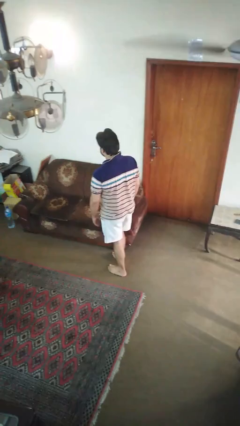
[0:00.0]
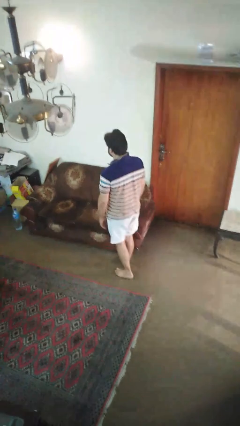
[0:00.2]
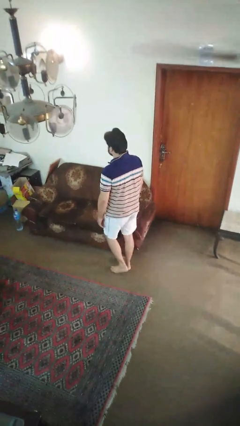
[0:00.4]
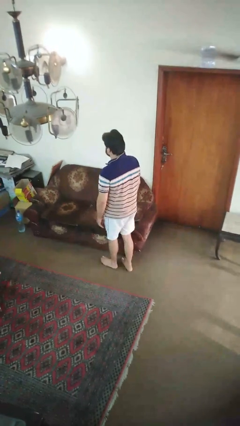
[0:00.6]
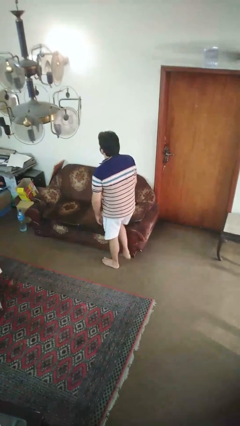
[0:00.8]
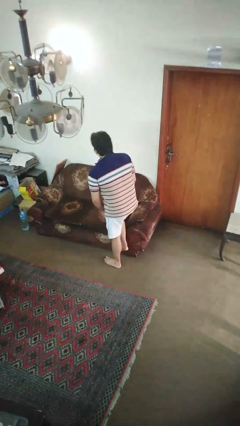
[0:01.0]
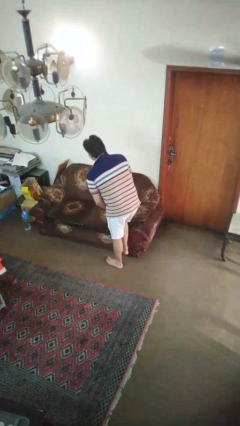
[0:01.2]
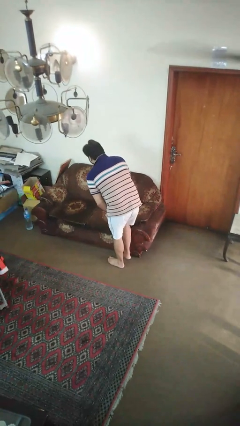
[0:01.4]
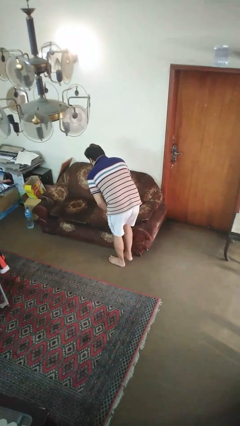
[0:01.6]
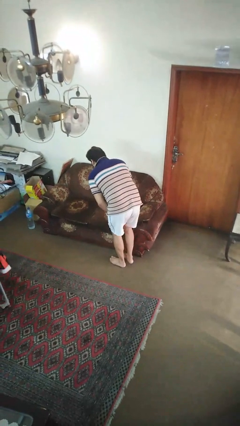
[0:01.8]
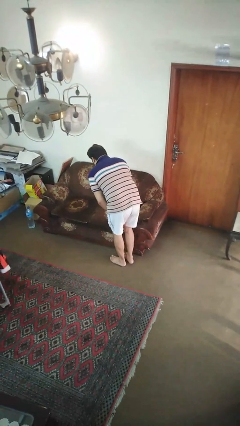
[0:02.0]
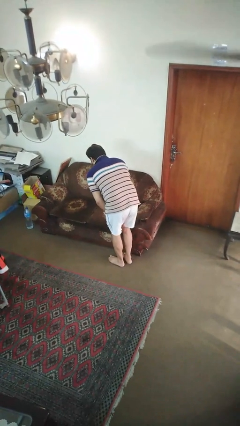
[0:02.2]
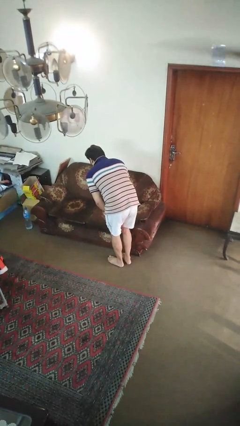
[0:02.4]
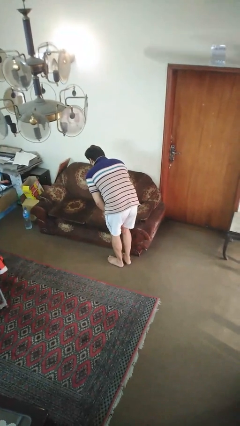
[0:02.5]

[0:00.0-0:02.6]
person stubs toe

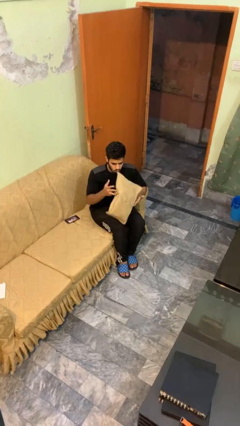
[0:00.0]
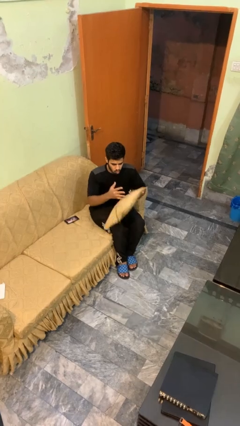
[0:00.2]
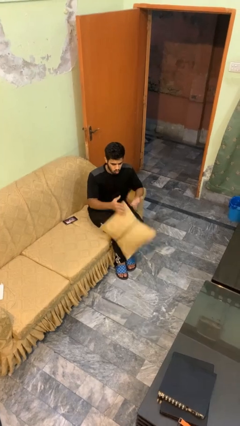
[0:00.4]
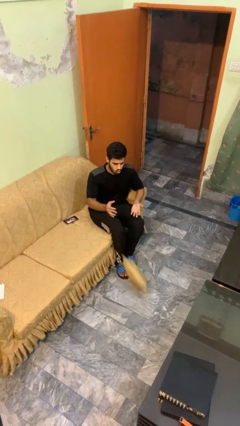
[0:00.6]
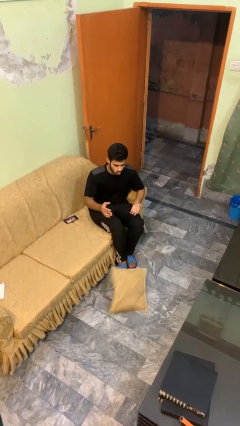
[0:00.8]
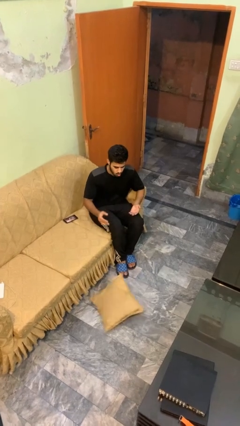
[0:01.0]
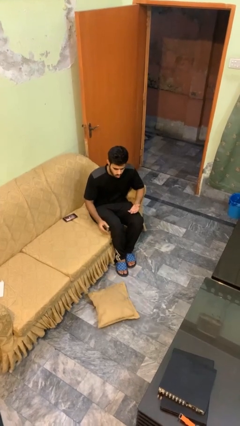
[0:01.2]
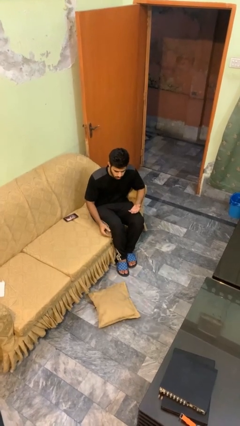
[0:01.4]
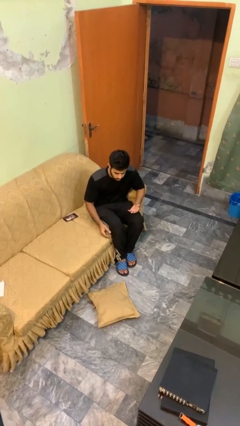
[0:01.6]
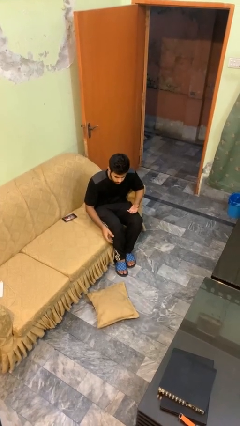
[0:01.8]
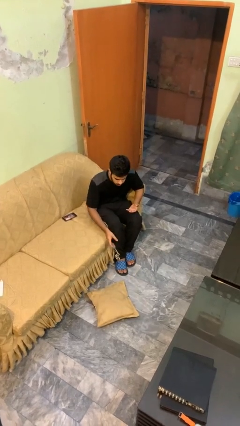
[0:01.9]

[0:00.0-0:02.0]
person drops object

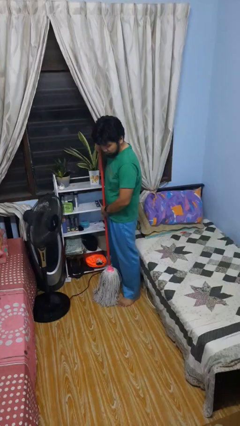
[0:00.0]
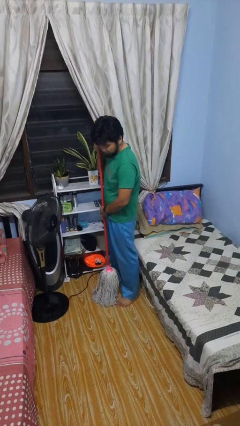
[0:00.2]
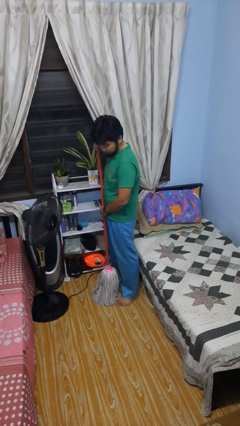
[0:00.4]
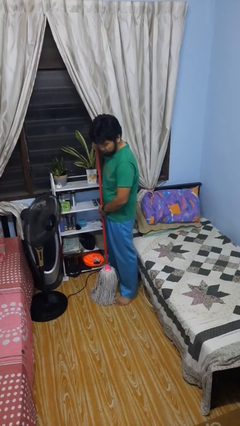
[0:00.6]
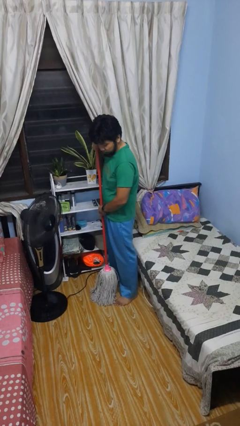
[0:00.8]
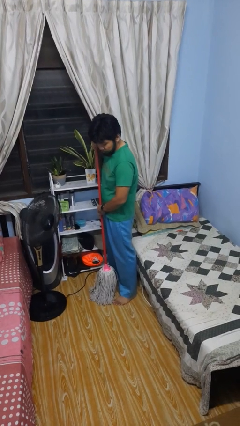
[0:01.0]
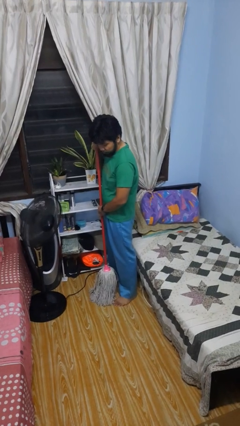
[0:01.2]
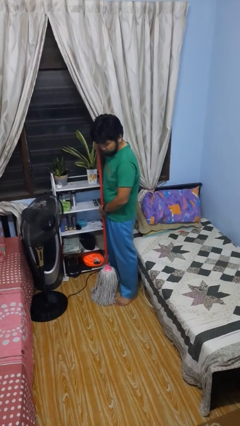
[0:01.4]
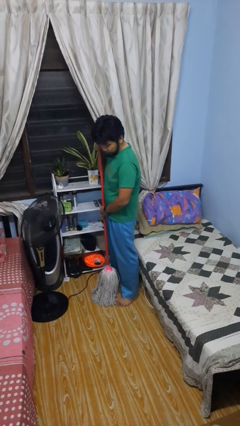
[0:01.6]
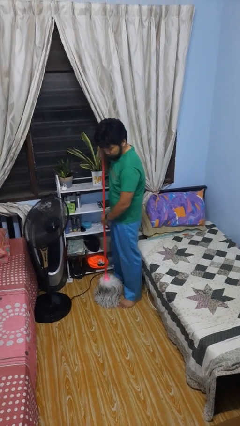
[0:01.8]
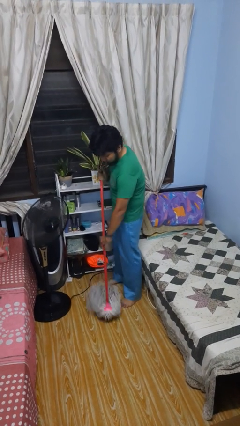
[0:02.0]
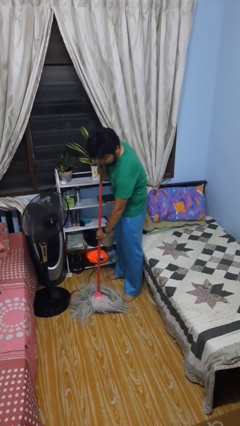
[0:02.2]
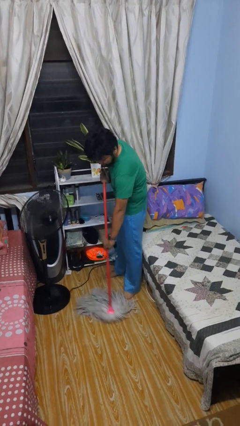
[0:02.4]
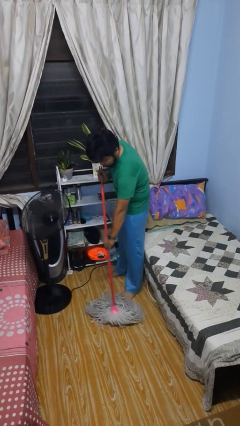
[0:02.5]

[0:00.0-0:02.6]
person mops

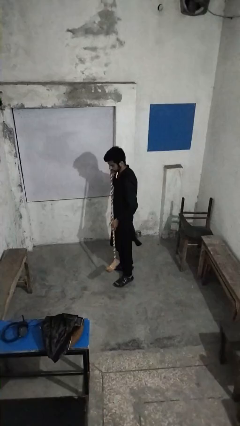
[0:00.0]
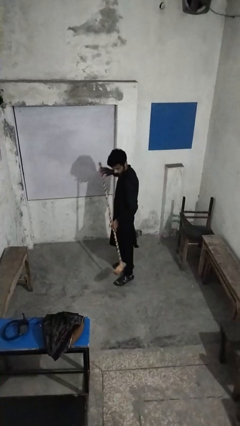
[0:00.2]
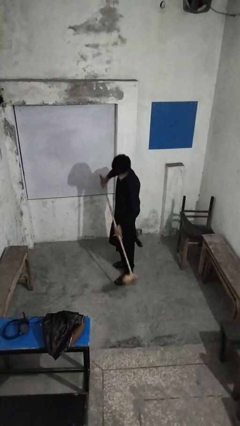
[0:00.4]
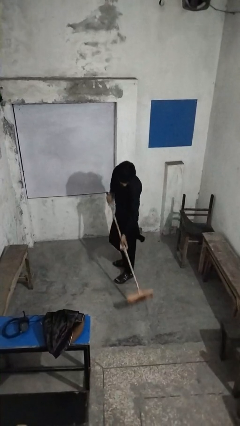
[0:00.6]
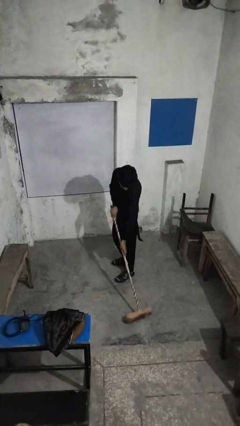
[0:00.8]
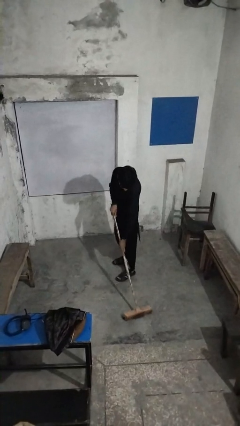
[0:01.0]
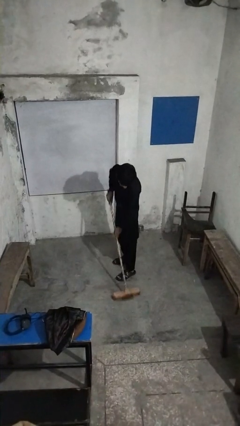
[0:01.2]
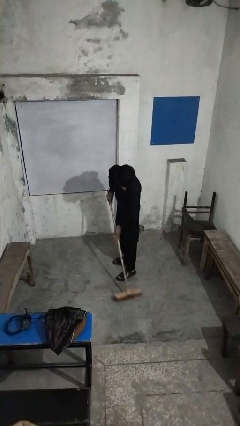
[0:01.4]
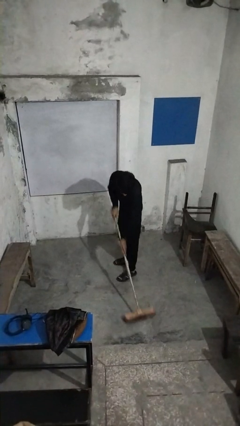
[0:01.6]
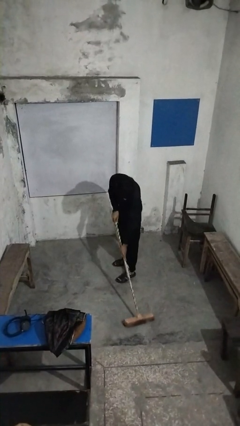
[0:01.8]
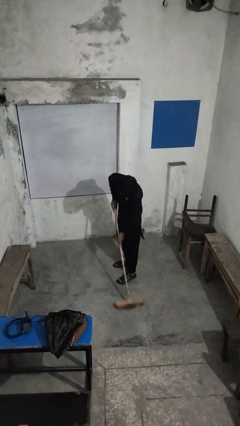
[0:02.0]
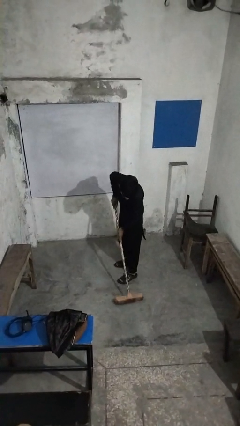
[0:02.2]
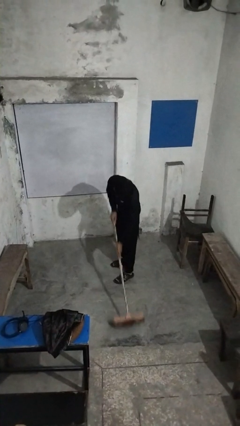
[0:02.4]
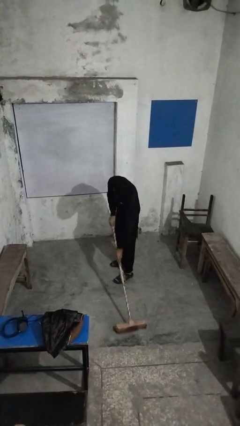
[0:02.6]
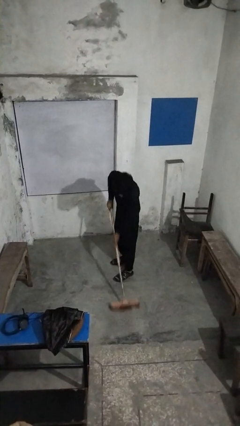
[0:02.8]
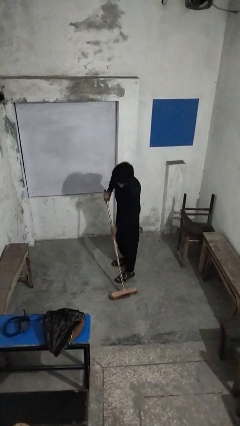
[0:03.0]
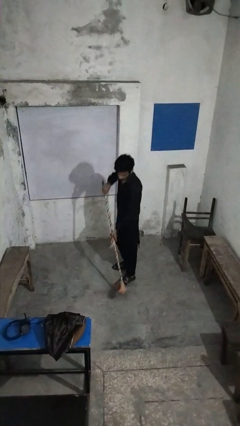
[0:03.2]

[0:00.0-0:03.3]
person sweeps floor

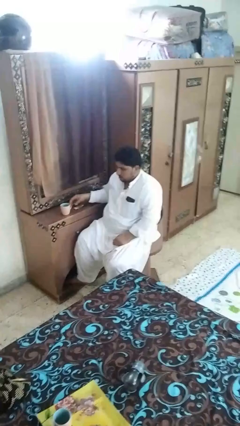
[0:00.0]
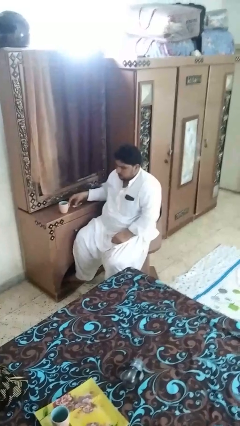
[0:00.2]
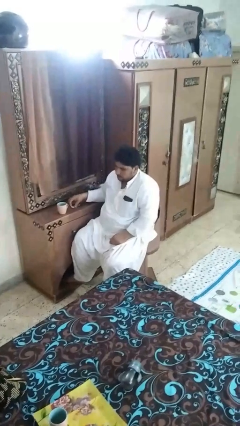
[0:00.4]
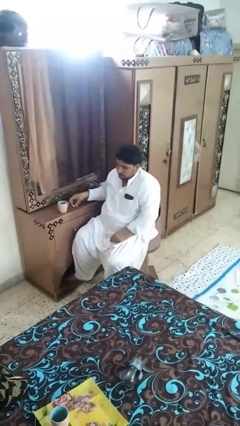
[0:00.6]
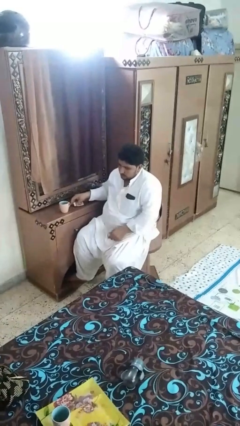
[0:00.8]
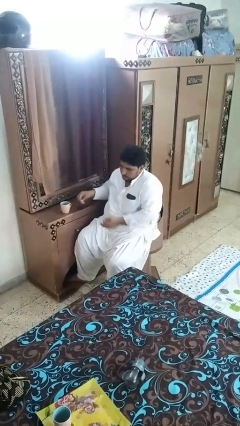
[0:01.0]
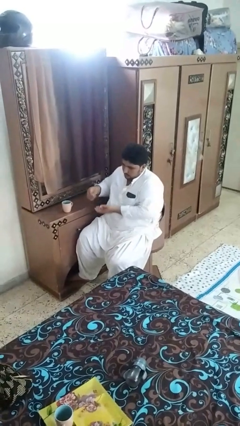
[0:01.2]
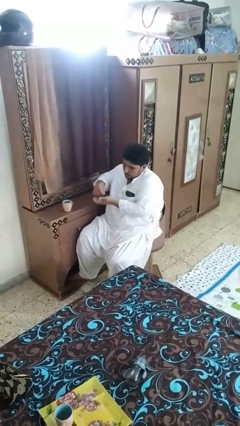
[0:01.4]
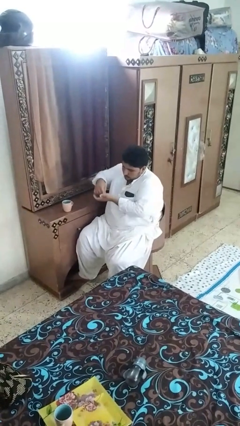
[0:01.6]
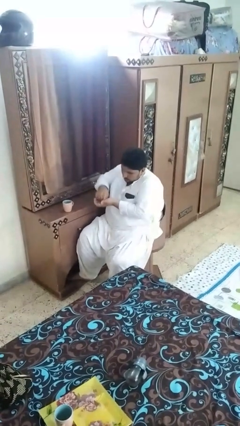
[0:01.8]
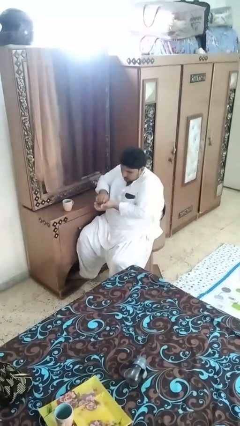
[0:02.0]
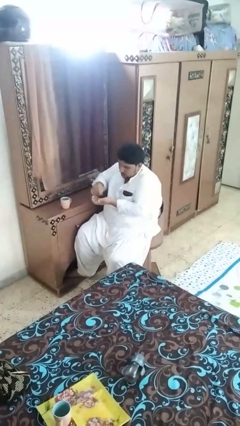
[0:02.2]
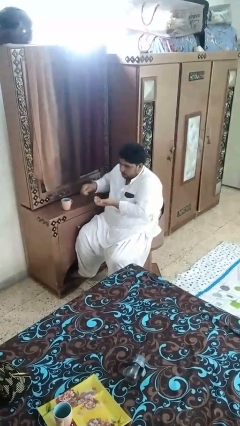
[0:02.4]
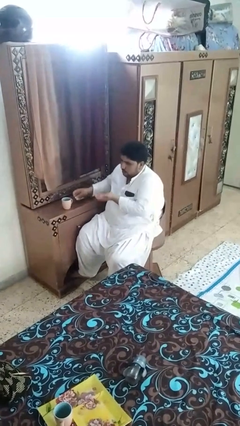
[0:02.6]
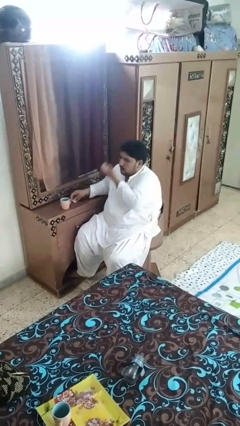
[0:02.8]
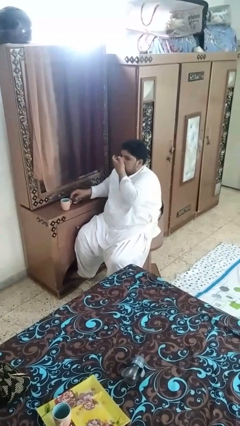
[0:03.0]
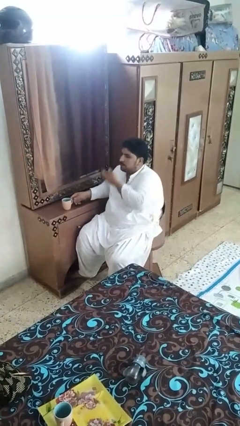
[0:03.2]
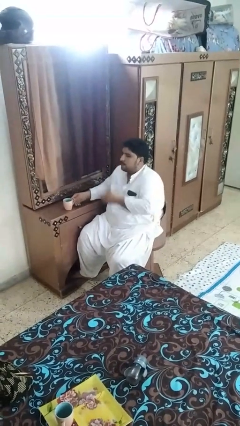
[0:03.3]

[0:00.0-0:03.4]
person takes medicine pills

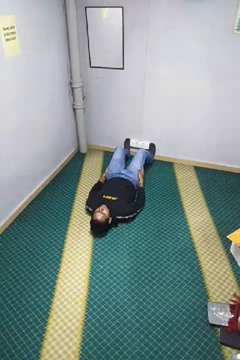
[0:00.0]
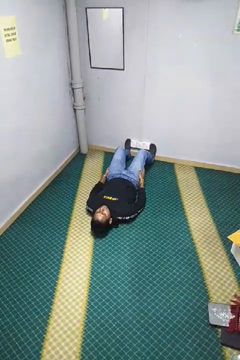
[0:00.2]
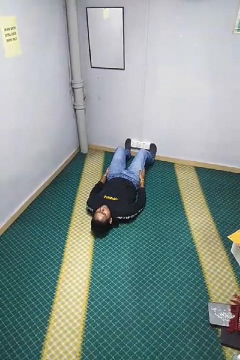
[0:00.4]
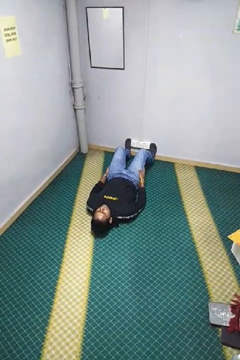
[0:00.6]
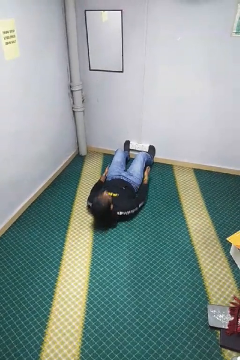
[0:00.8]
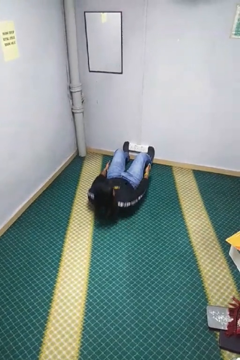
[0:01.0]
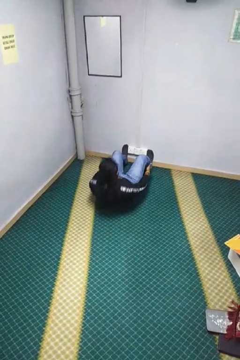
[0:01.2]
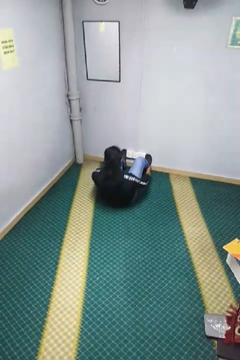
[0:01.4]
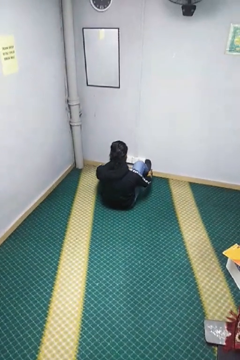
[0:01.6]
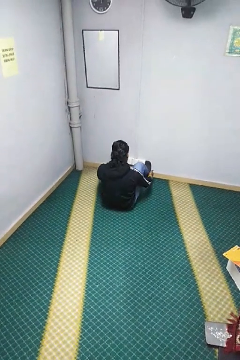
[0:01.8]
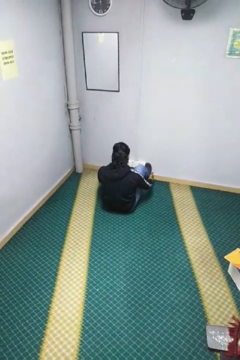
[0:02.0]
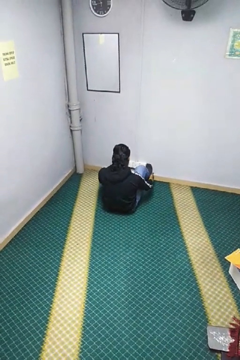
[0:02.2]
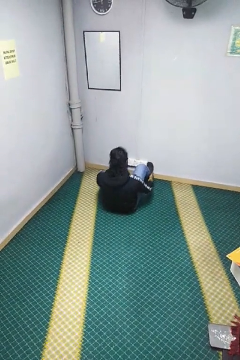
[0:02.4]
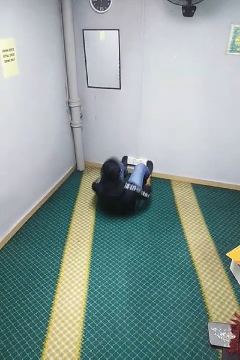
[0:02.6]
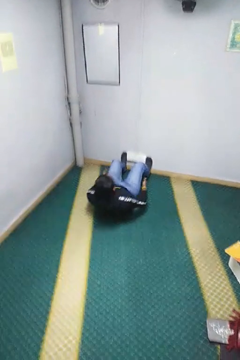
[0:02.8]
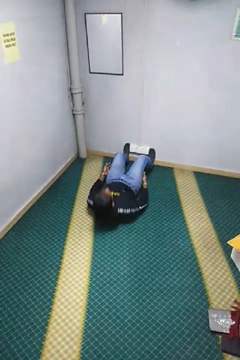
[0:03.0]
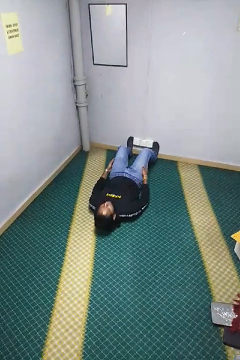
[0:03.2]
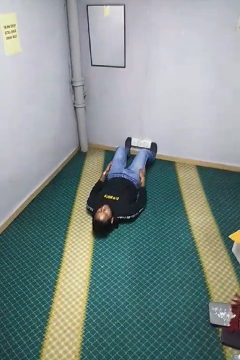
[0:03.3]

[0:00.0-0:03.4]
person exercises with situp

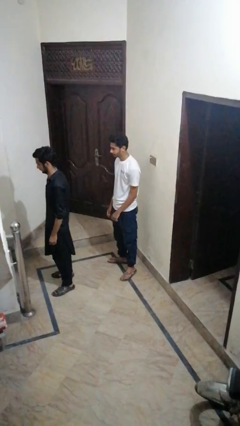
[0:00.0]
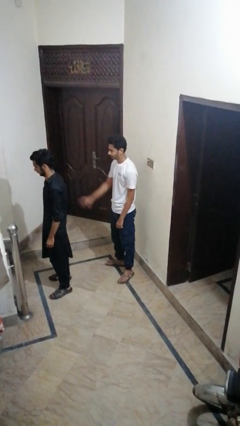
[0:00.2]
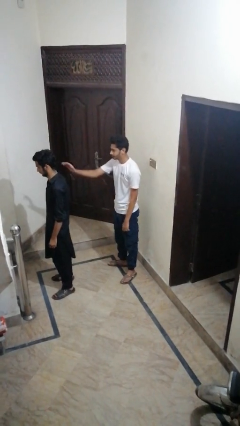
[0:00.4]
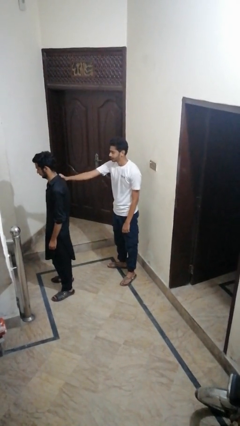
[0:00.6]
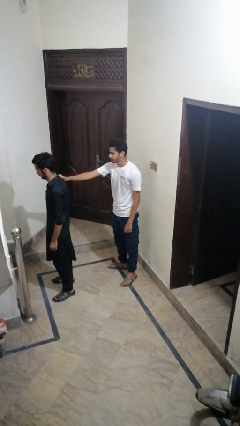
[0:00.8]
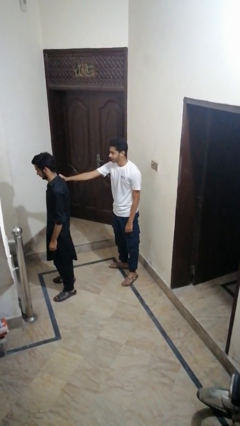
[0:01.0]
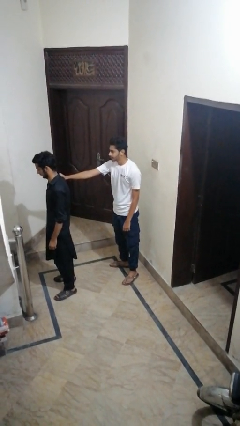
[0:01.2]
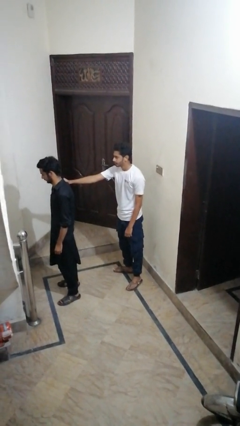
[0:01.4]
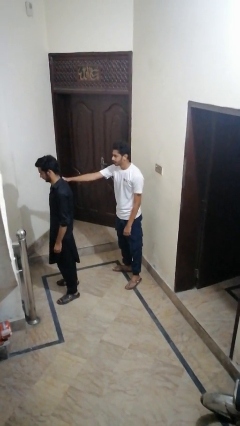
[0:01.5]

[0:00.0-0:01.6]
person grabs person by shoulder
